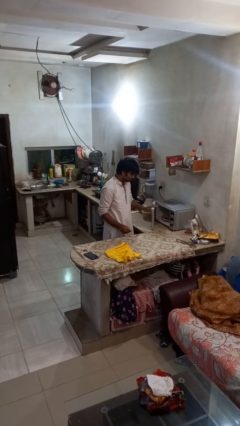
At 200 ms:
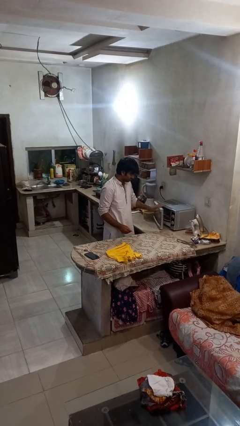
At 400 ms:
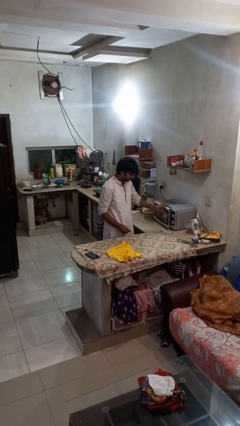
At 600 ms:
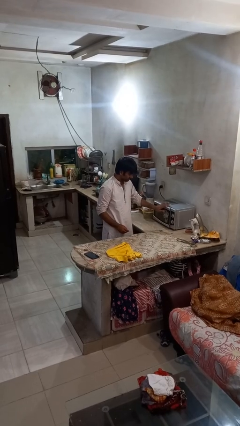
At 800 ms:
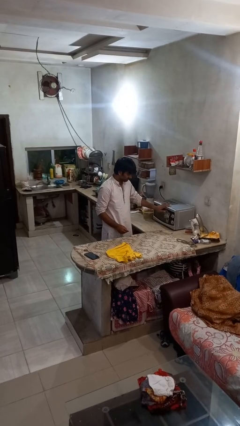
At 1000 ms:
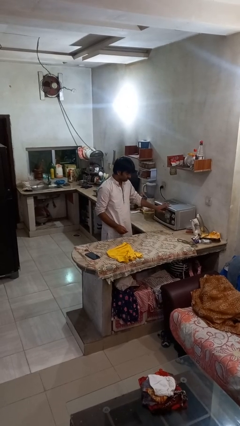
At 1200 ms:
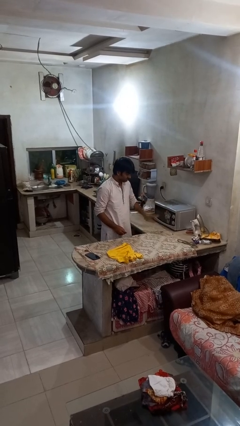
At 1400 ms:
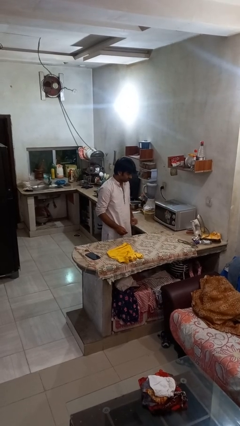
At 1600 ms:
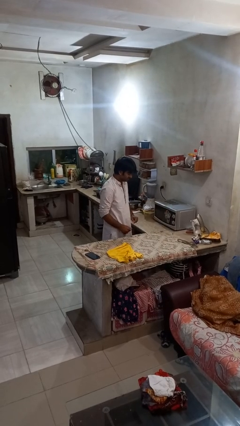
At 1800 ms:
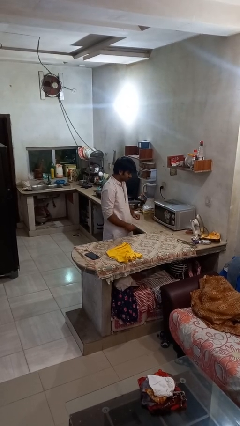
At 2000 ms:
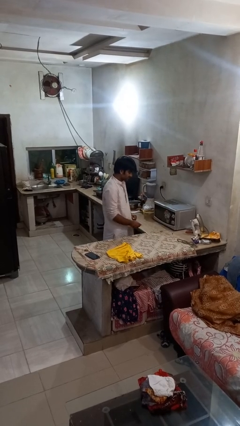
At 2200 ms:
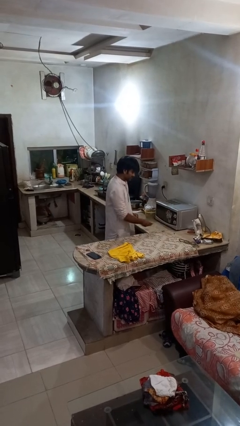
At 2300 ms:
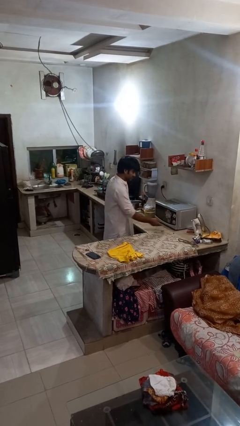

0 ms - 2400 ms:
person closes microwave

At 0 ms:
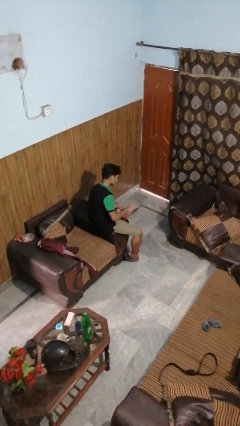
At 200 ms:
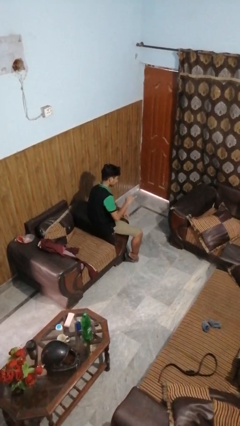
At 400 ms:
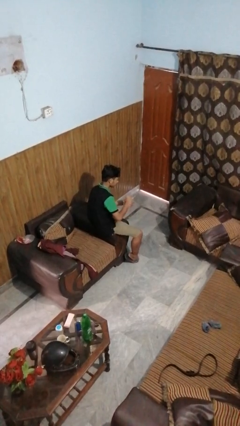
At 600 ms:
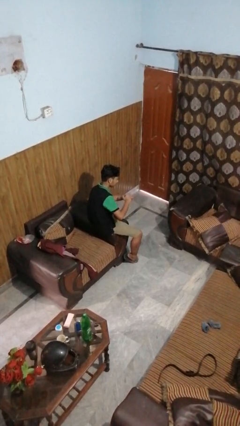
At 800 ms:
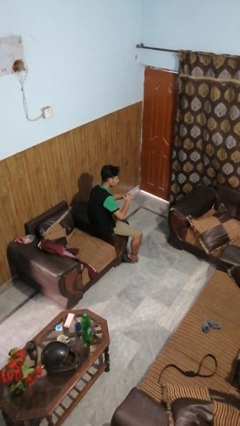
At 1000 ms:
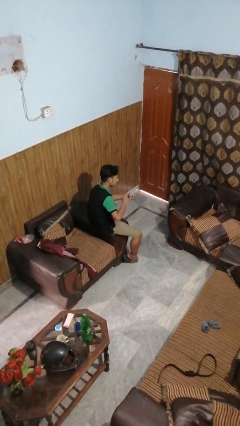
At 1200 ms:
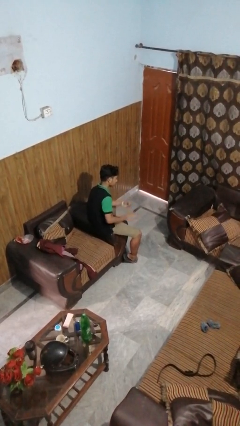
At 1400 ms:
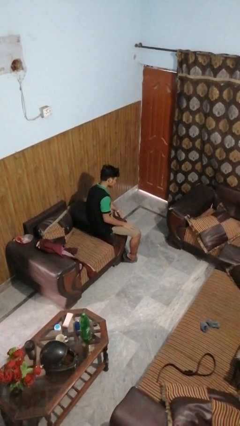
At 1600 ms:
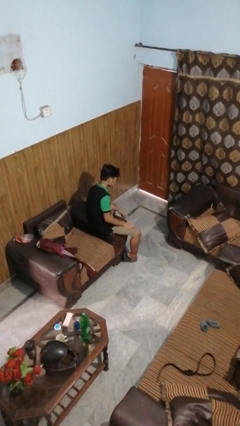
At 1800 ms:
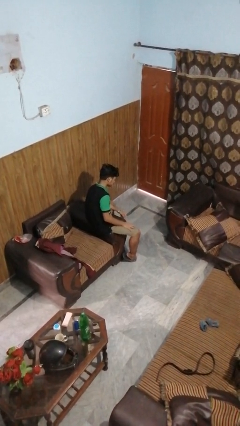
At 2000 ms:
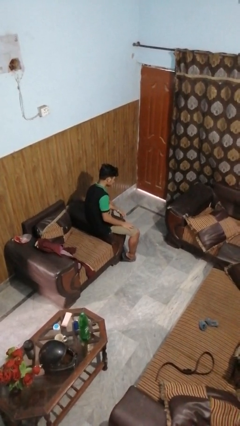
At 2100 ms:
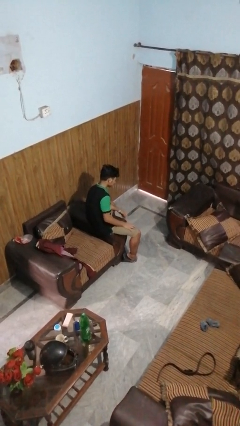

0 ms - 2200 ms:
person takes off ring

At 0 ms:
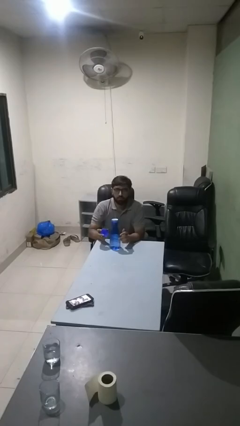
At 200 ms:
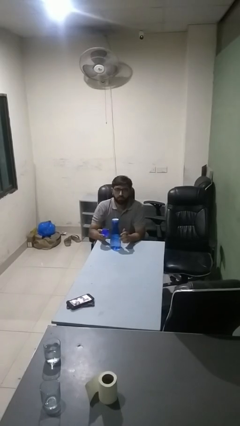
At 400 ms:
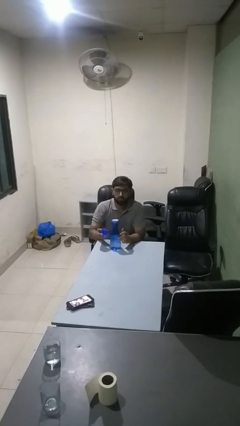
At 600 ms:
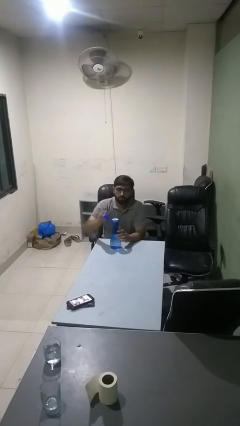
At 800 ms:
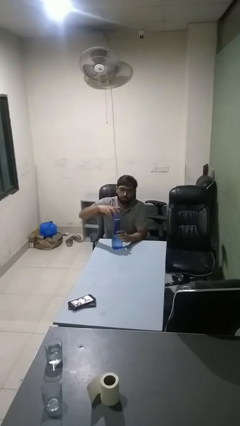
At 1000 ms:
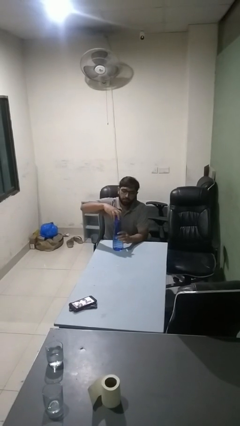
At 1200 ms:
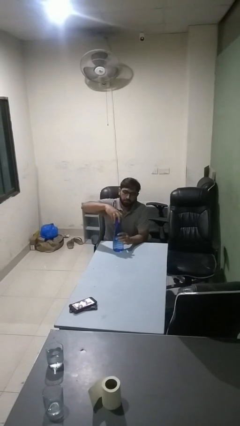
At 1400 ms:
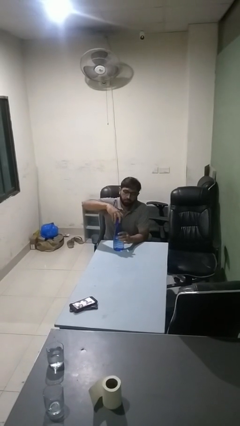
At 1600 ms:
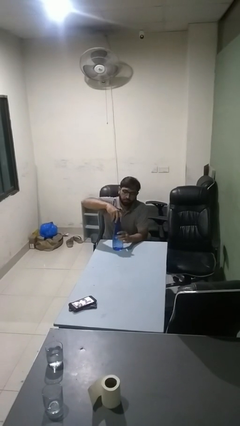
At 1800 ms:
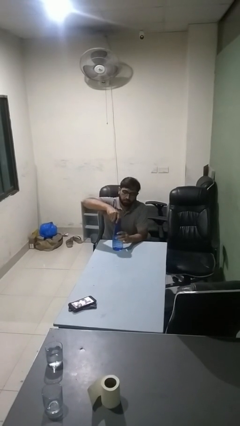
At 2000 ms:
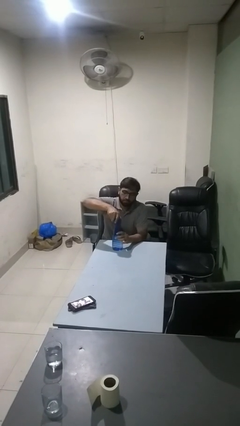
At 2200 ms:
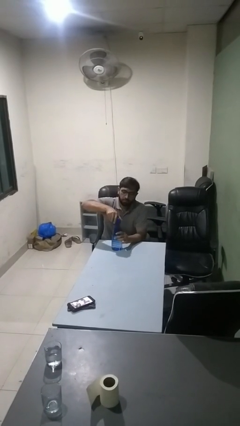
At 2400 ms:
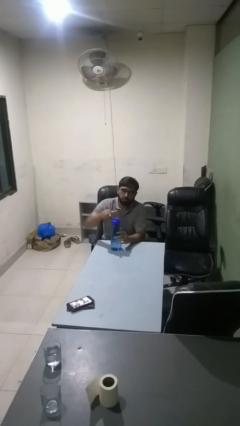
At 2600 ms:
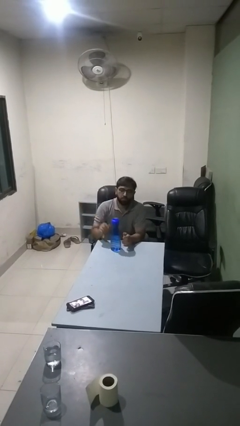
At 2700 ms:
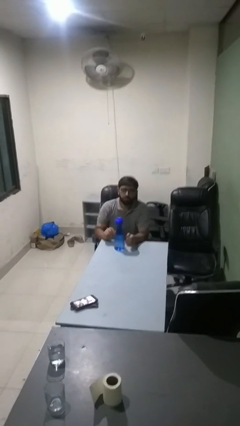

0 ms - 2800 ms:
person screws lid to bottle

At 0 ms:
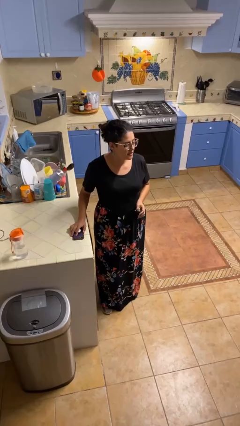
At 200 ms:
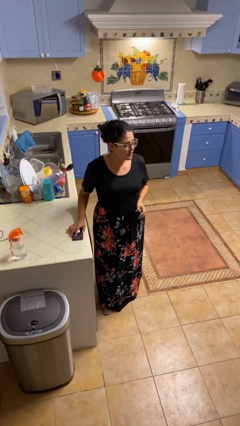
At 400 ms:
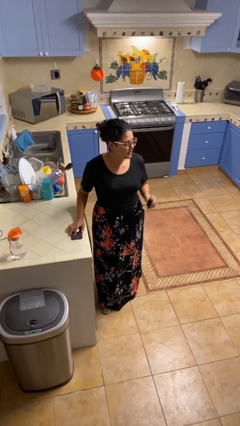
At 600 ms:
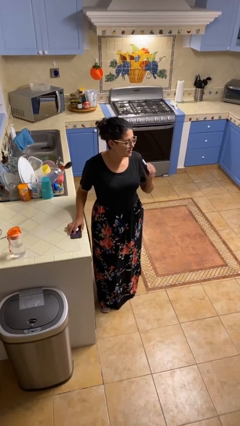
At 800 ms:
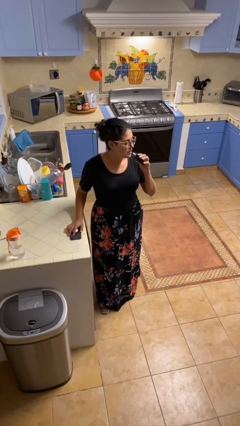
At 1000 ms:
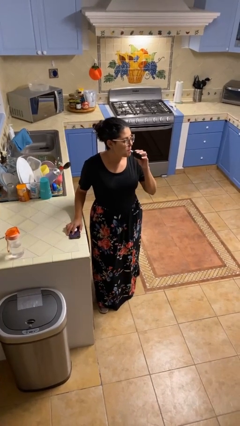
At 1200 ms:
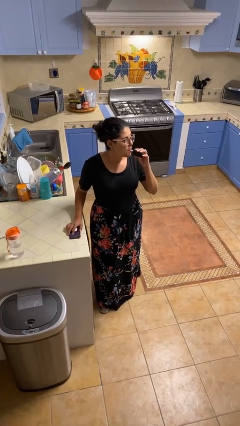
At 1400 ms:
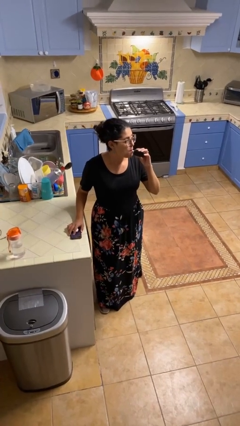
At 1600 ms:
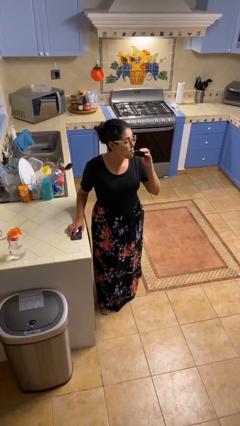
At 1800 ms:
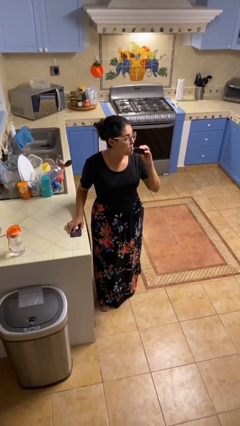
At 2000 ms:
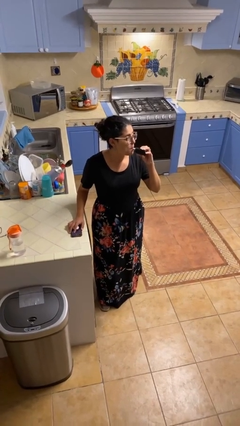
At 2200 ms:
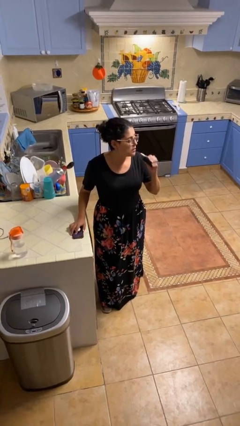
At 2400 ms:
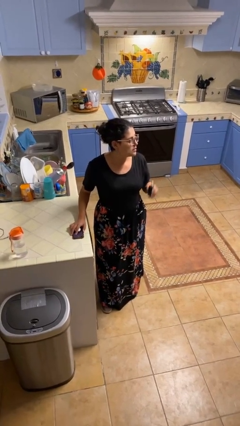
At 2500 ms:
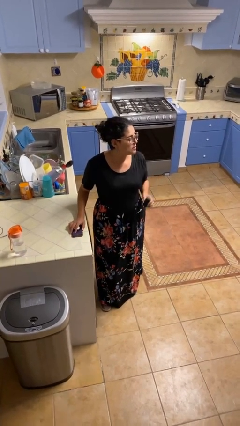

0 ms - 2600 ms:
person vapes

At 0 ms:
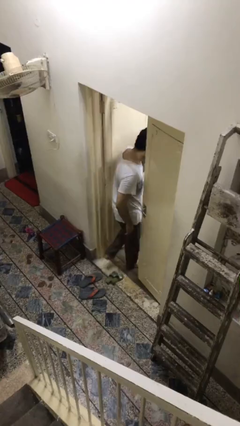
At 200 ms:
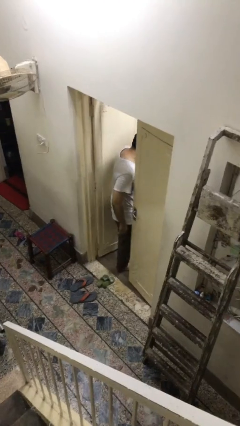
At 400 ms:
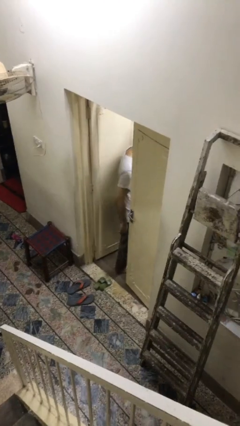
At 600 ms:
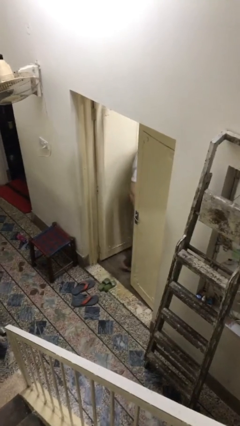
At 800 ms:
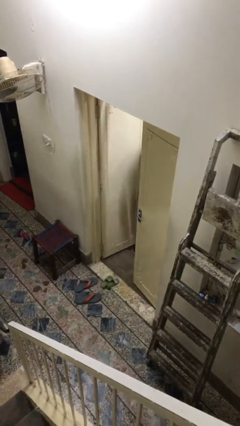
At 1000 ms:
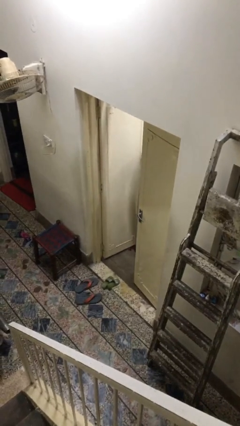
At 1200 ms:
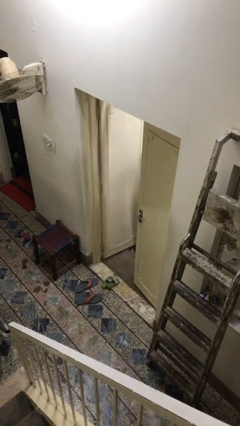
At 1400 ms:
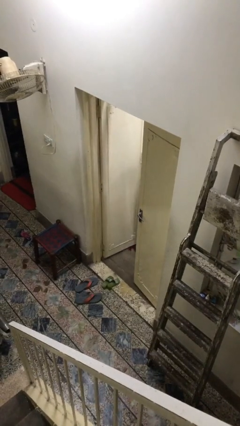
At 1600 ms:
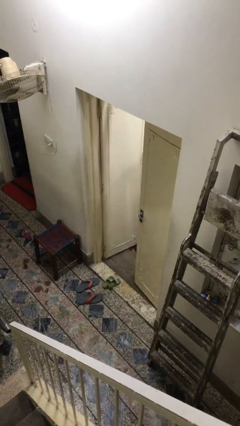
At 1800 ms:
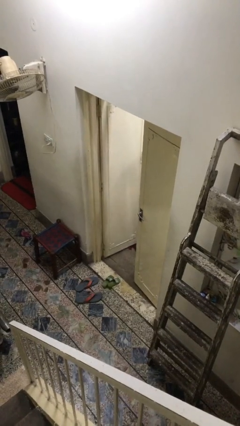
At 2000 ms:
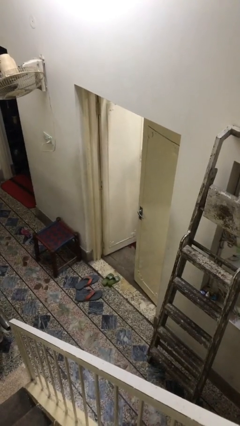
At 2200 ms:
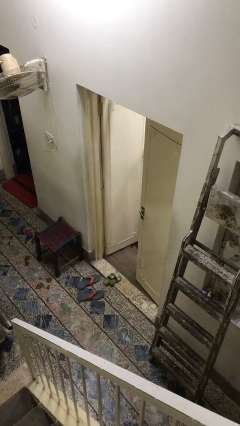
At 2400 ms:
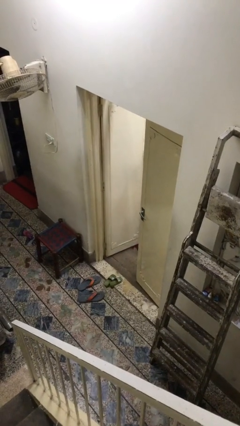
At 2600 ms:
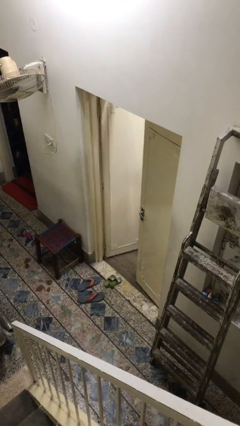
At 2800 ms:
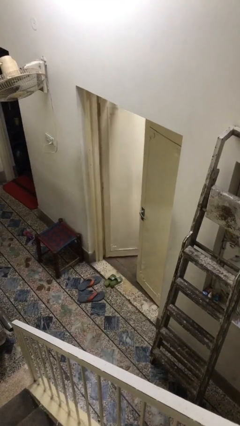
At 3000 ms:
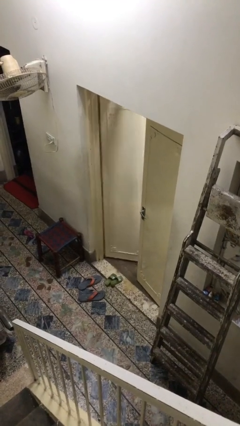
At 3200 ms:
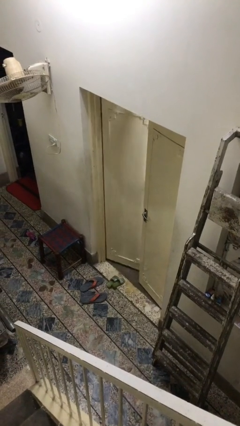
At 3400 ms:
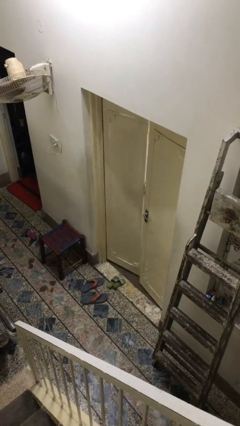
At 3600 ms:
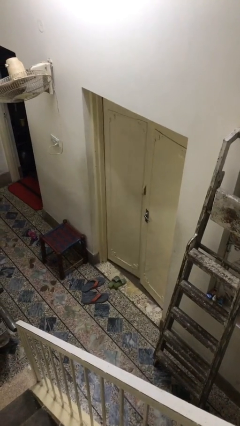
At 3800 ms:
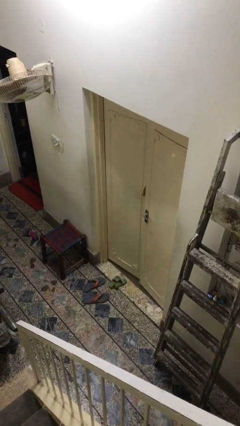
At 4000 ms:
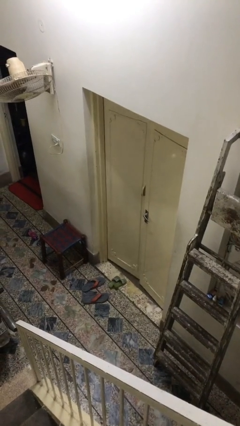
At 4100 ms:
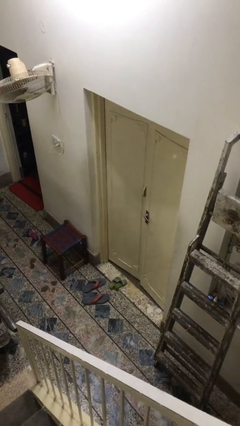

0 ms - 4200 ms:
person closes facility door

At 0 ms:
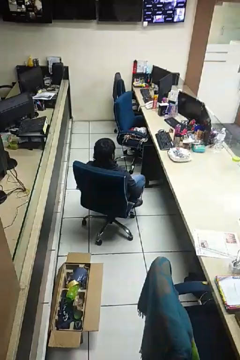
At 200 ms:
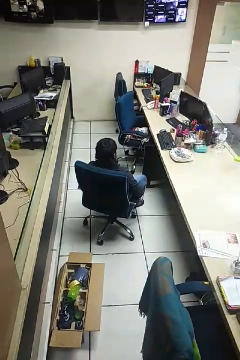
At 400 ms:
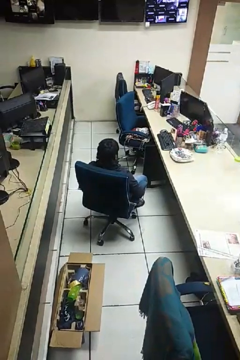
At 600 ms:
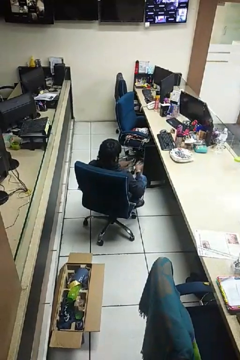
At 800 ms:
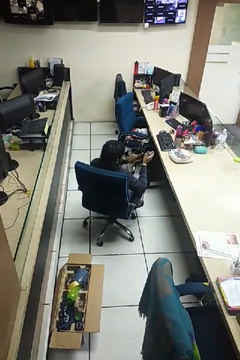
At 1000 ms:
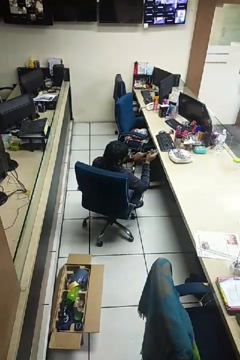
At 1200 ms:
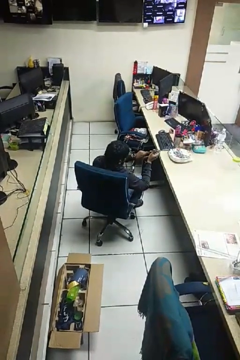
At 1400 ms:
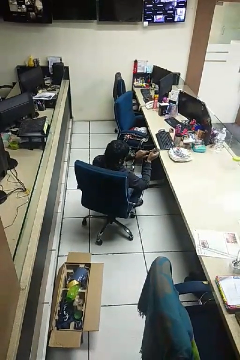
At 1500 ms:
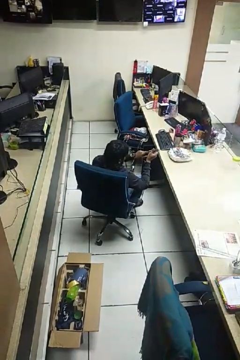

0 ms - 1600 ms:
person clips fingernails

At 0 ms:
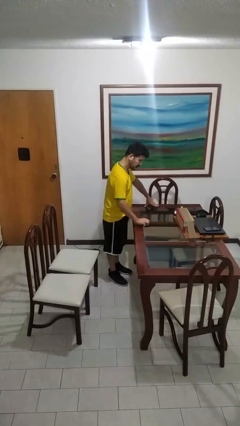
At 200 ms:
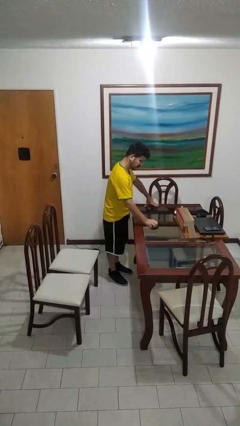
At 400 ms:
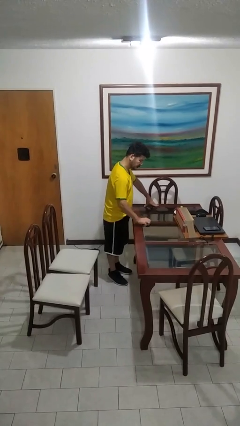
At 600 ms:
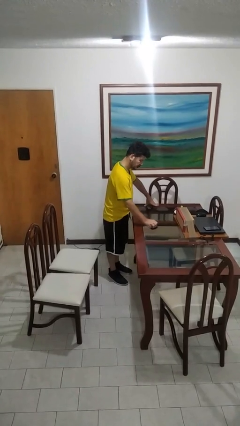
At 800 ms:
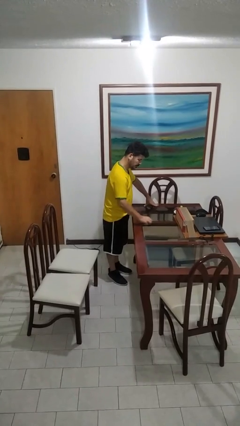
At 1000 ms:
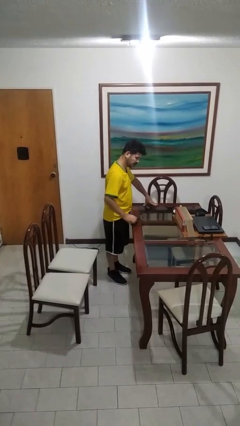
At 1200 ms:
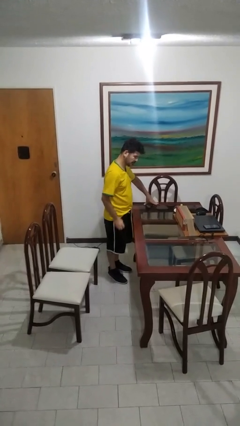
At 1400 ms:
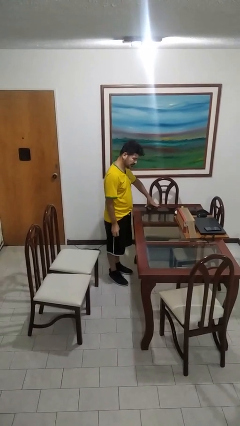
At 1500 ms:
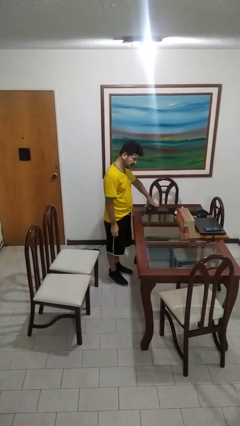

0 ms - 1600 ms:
person cleans table with rag

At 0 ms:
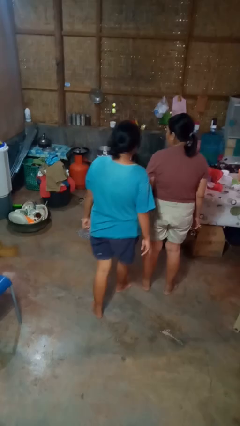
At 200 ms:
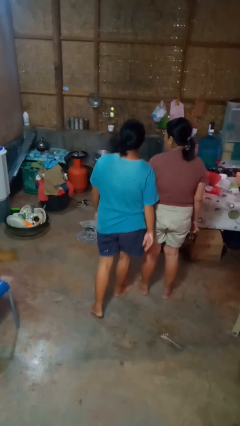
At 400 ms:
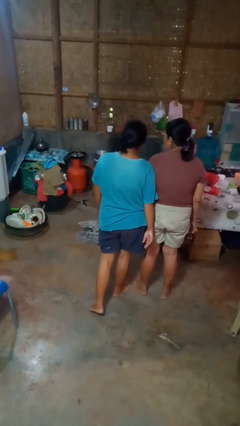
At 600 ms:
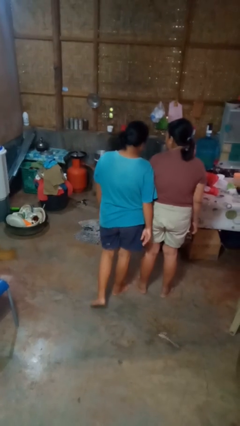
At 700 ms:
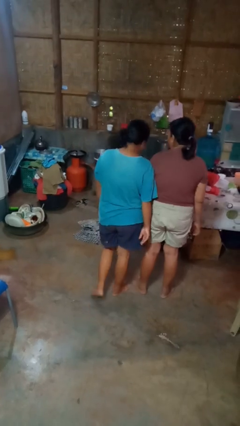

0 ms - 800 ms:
person bumps into person
